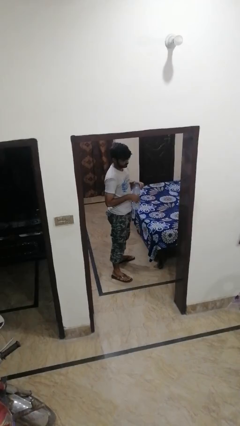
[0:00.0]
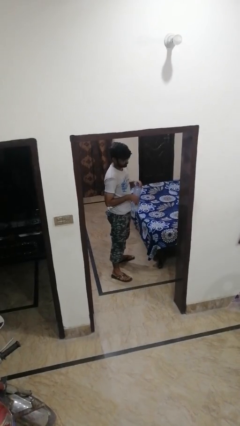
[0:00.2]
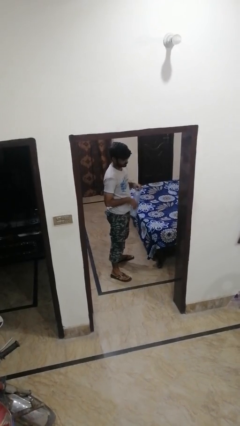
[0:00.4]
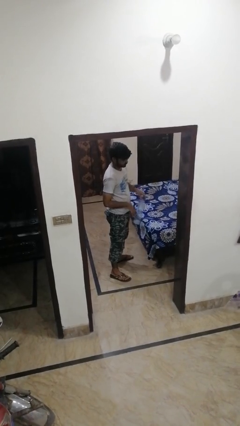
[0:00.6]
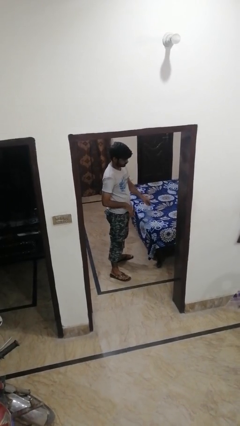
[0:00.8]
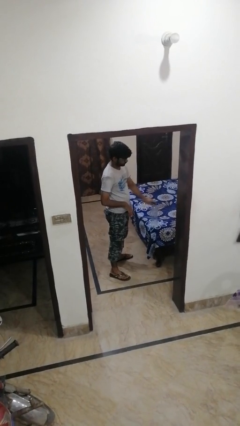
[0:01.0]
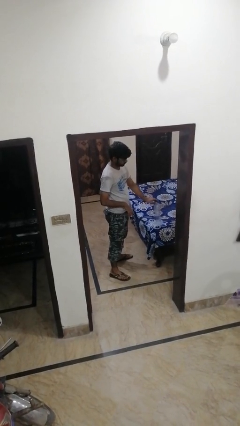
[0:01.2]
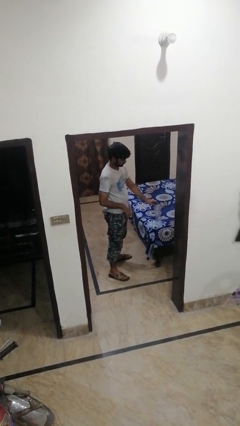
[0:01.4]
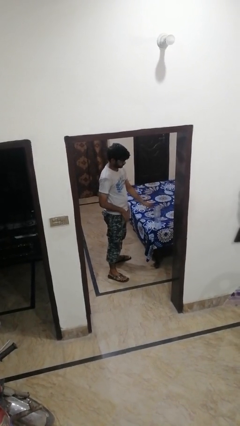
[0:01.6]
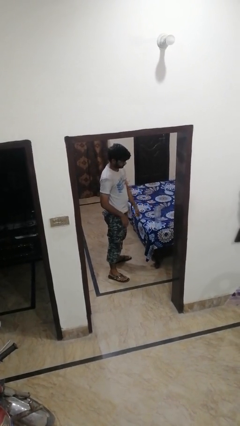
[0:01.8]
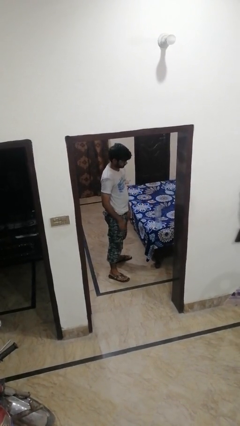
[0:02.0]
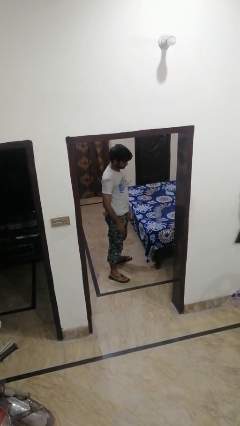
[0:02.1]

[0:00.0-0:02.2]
person puts down object on bed

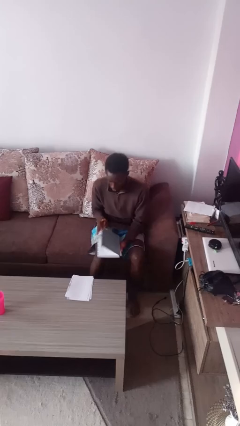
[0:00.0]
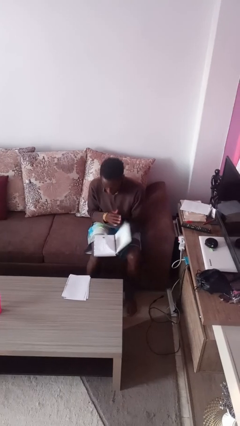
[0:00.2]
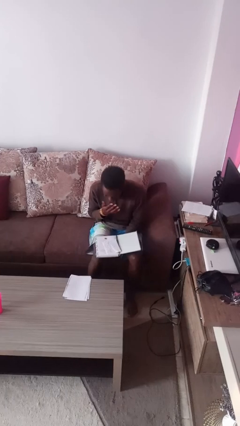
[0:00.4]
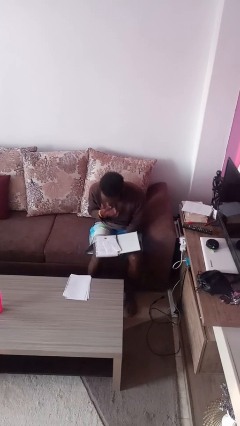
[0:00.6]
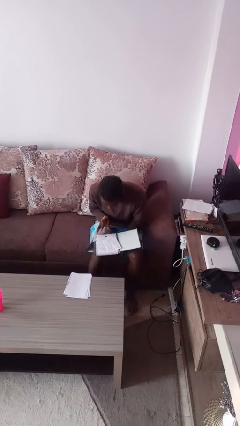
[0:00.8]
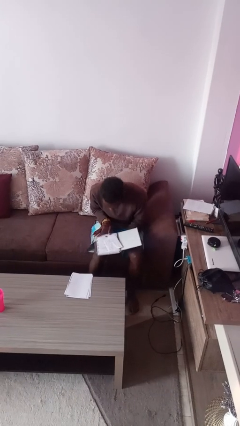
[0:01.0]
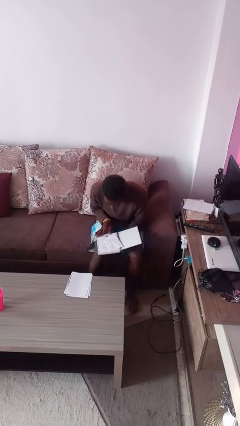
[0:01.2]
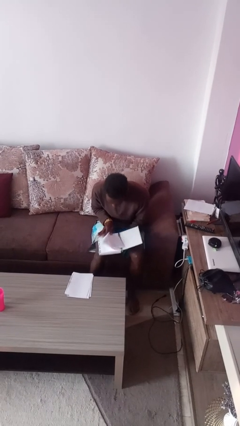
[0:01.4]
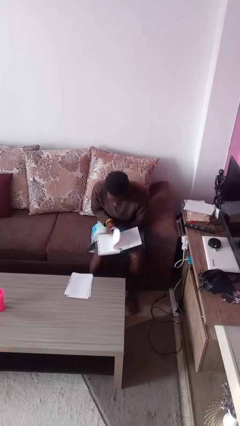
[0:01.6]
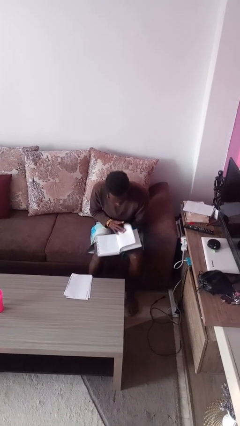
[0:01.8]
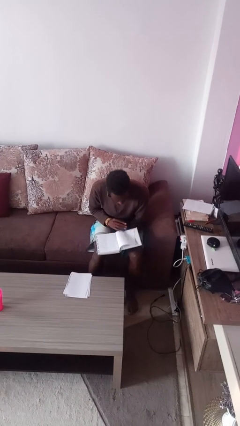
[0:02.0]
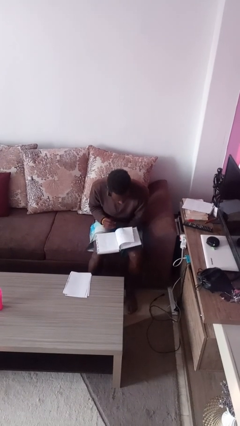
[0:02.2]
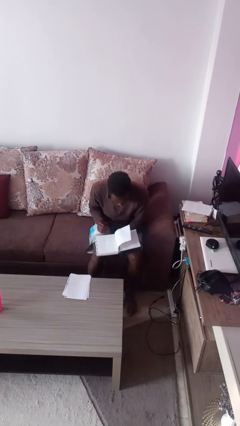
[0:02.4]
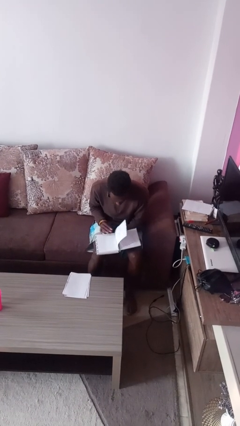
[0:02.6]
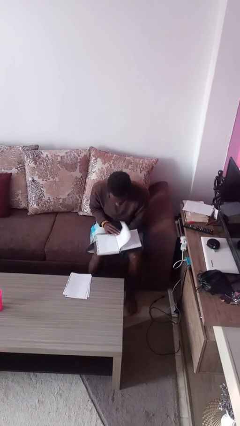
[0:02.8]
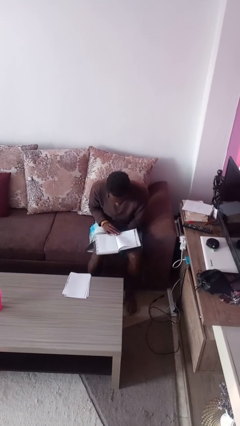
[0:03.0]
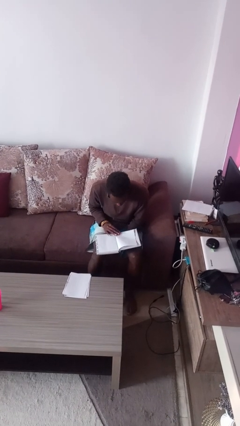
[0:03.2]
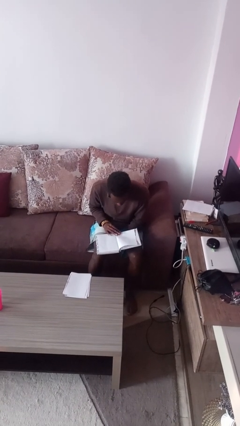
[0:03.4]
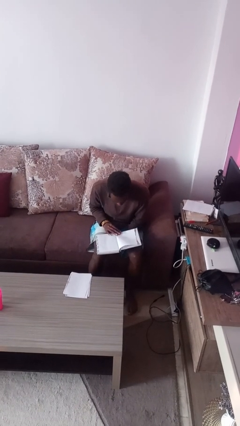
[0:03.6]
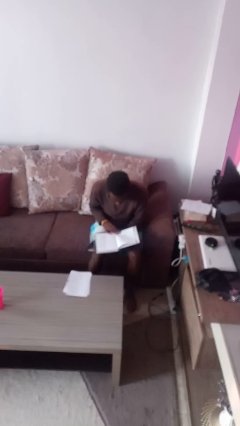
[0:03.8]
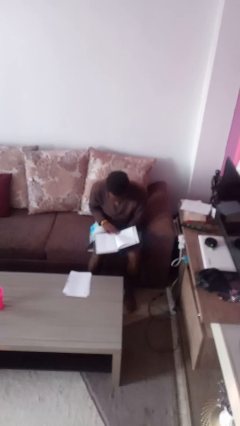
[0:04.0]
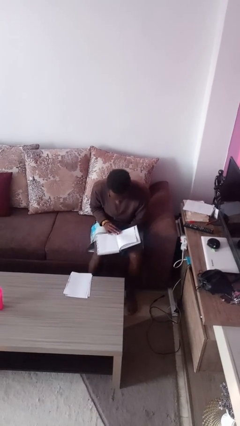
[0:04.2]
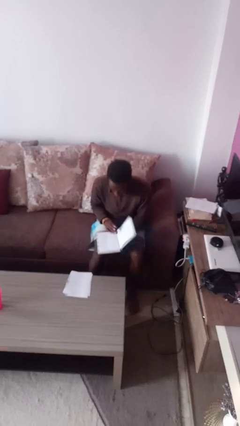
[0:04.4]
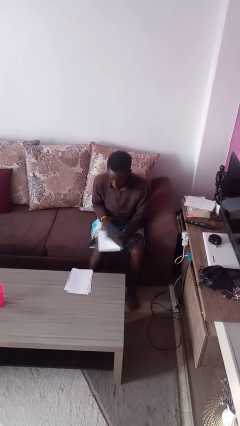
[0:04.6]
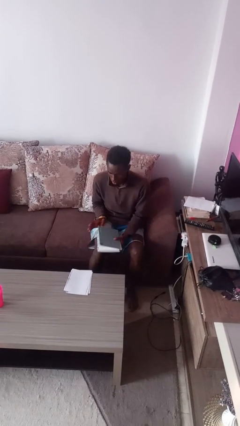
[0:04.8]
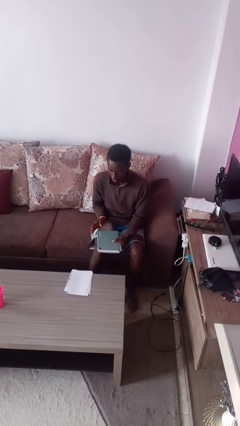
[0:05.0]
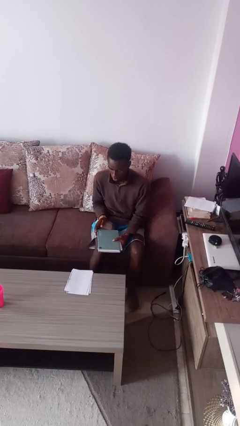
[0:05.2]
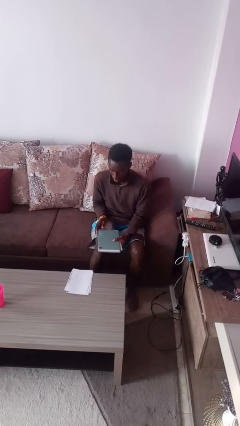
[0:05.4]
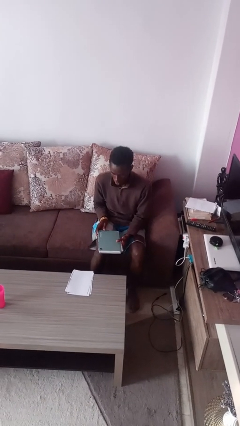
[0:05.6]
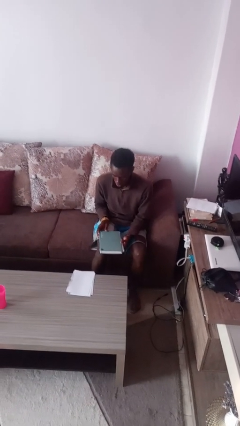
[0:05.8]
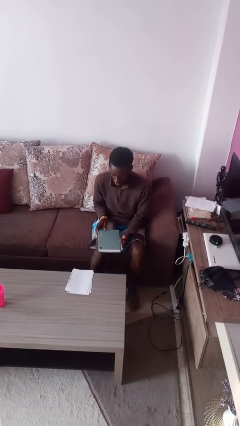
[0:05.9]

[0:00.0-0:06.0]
person reads book

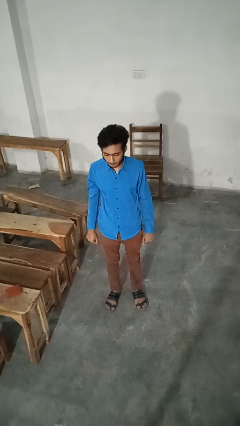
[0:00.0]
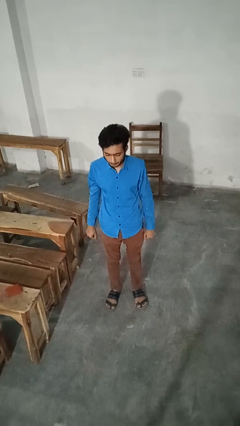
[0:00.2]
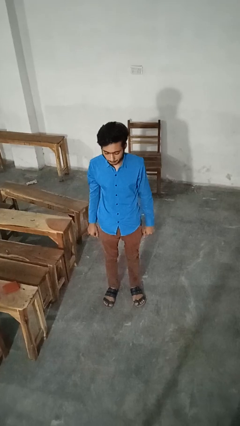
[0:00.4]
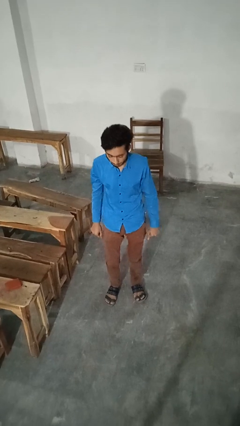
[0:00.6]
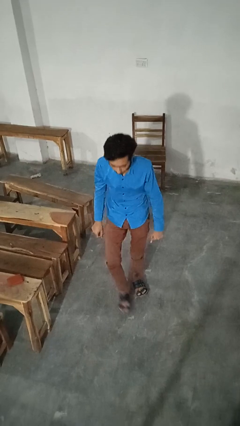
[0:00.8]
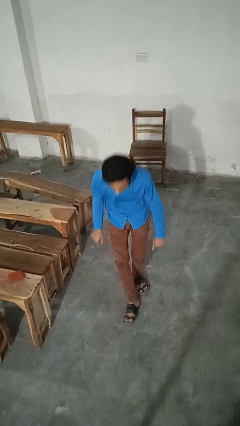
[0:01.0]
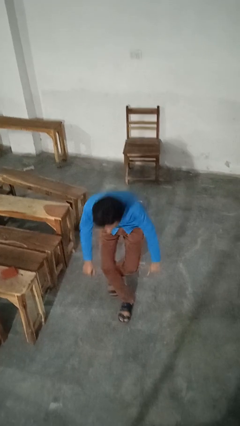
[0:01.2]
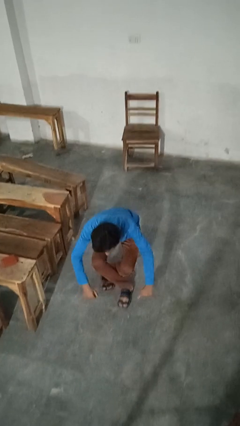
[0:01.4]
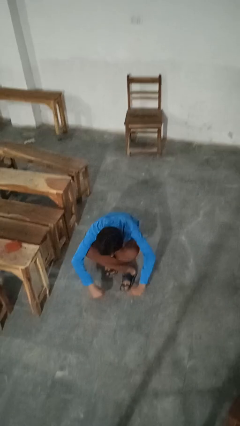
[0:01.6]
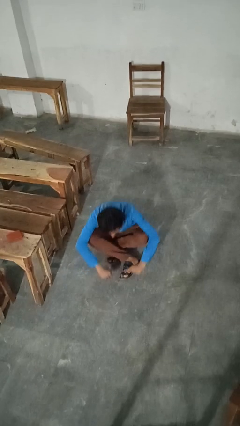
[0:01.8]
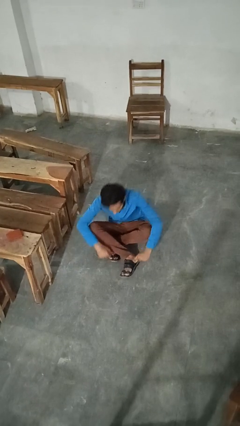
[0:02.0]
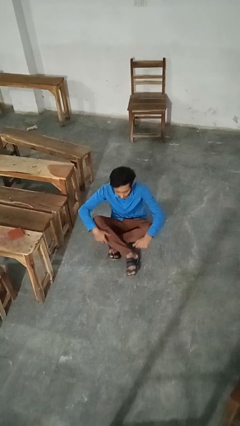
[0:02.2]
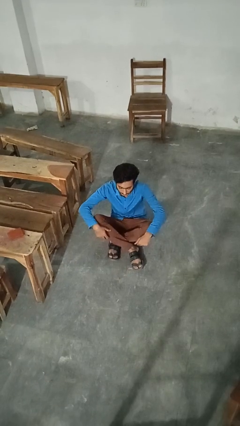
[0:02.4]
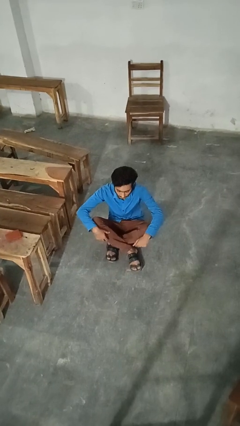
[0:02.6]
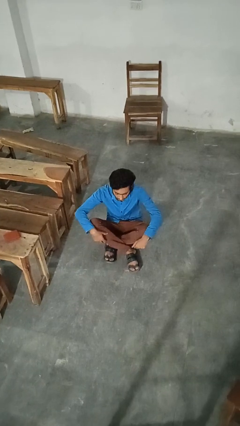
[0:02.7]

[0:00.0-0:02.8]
person sits crisscross

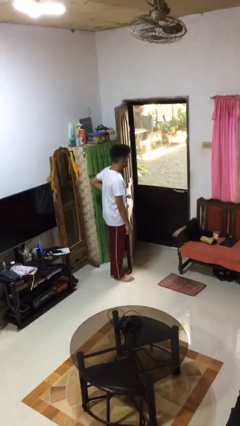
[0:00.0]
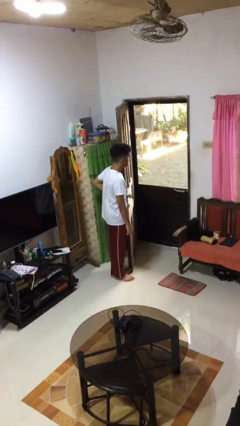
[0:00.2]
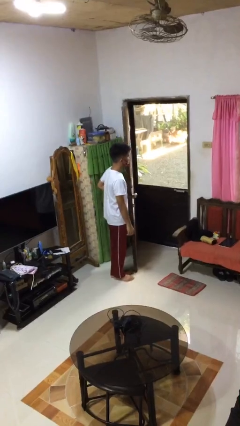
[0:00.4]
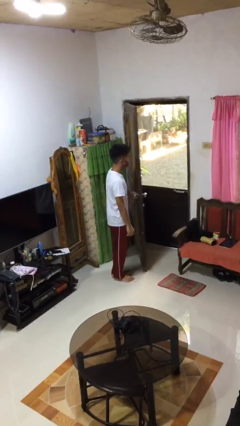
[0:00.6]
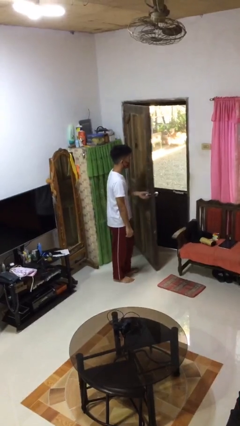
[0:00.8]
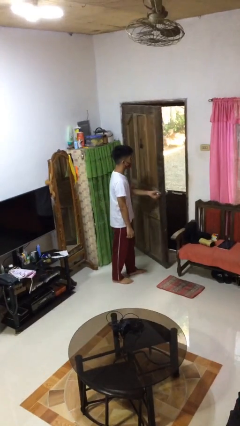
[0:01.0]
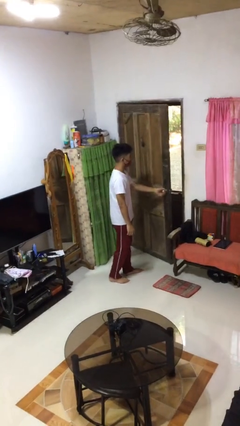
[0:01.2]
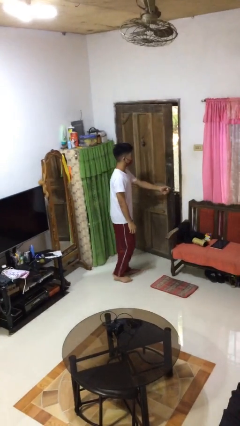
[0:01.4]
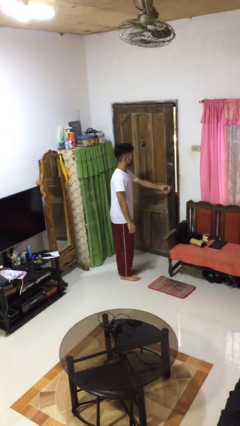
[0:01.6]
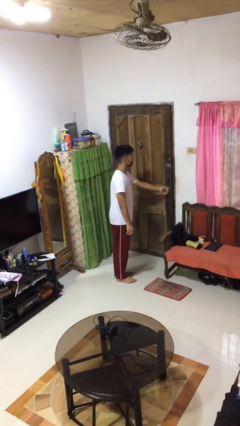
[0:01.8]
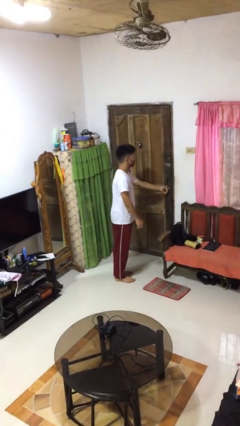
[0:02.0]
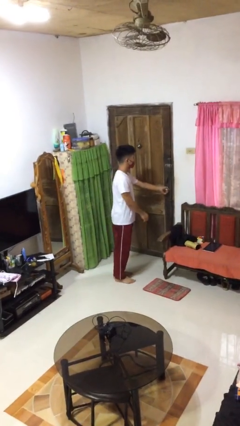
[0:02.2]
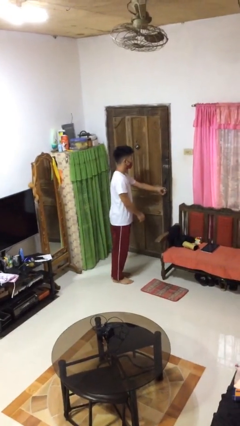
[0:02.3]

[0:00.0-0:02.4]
person closes facility door

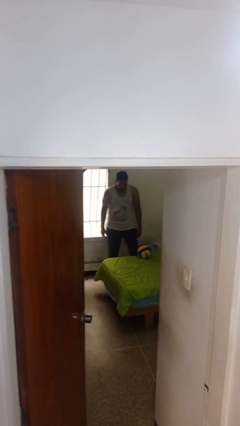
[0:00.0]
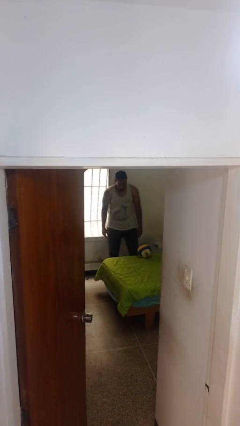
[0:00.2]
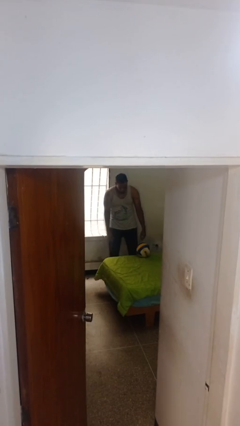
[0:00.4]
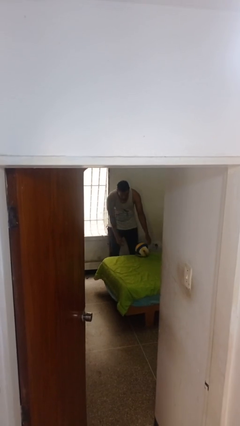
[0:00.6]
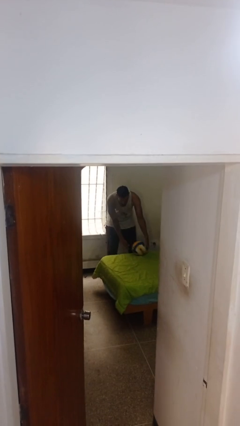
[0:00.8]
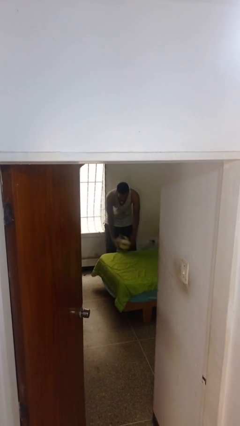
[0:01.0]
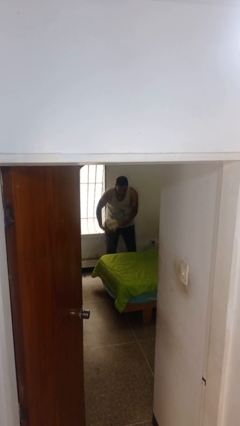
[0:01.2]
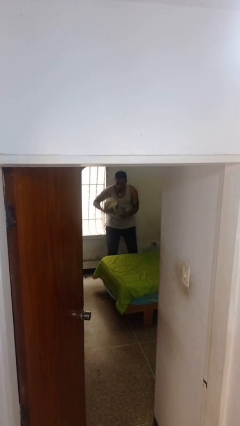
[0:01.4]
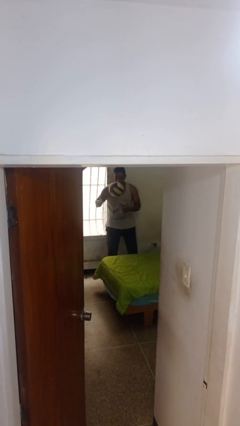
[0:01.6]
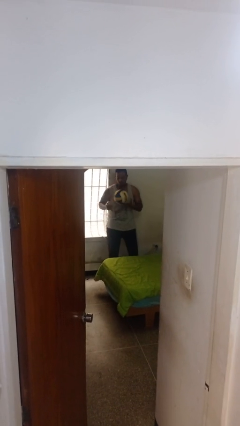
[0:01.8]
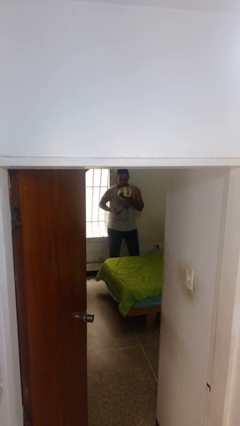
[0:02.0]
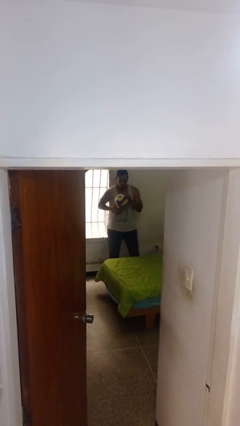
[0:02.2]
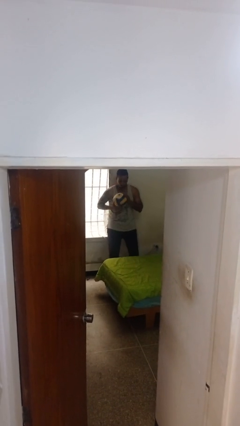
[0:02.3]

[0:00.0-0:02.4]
person picks up object from bed

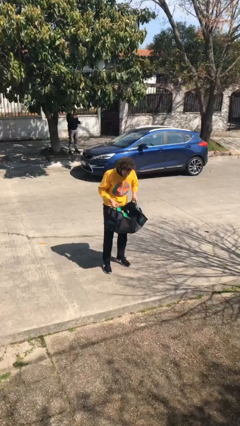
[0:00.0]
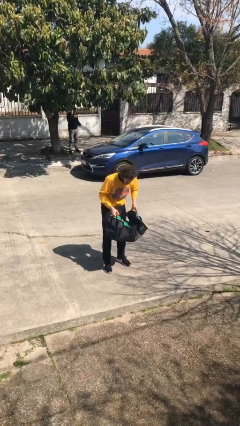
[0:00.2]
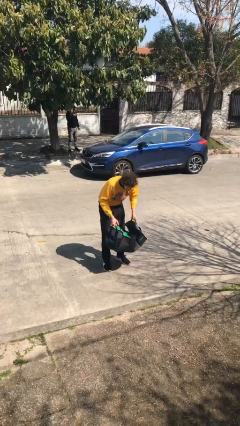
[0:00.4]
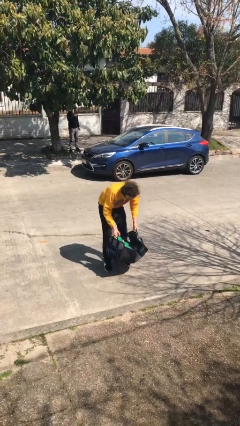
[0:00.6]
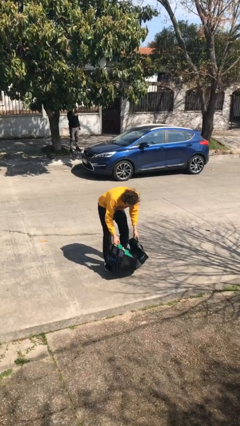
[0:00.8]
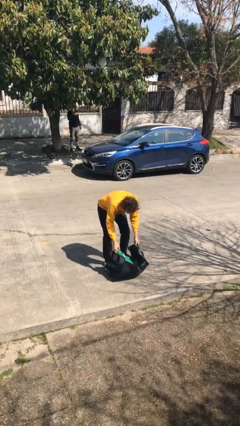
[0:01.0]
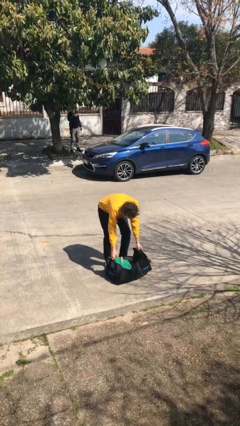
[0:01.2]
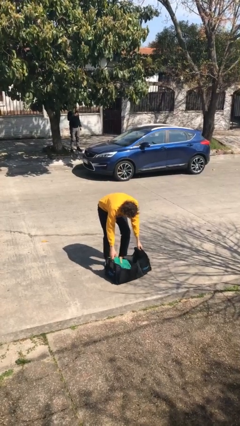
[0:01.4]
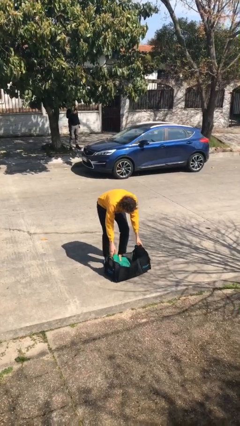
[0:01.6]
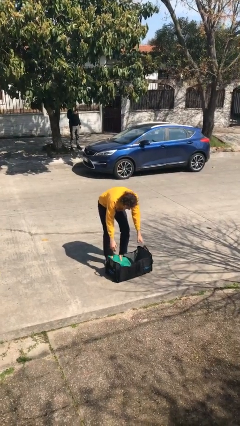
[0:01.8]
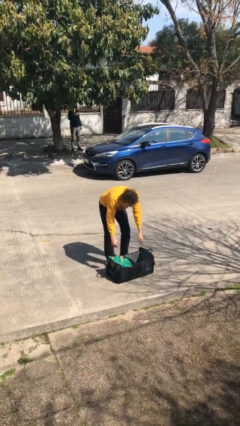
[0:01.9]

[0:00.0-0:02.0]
person puts down object on floor
